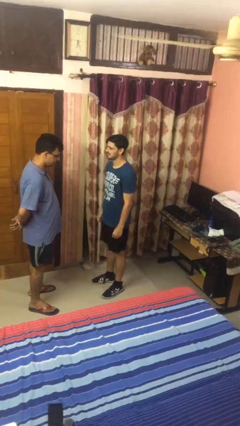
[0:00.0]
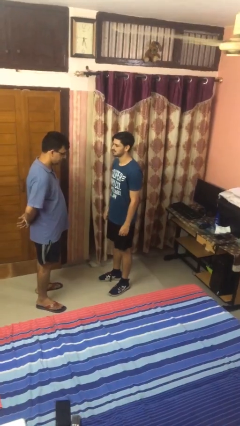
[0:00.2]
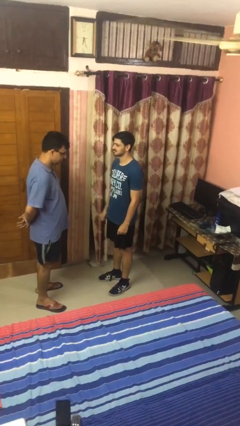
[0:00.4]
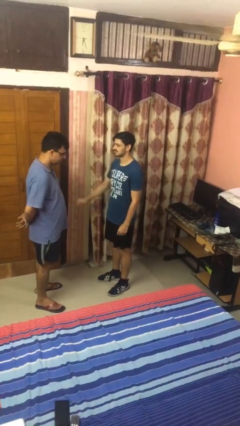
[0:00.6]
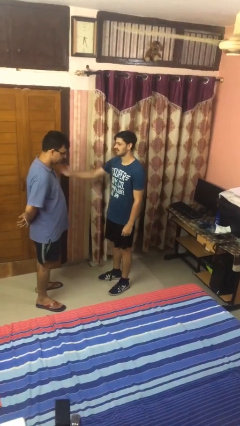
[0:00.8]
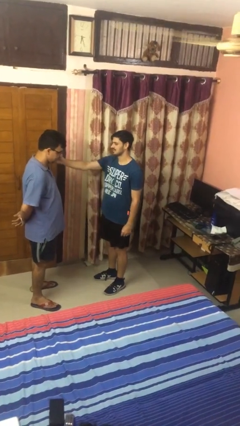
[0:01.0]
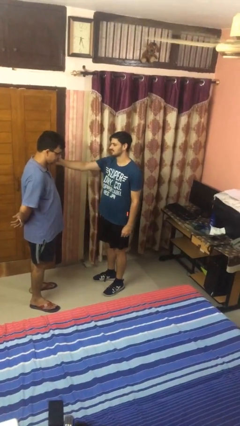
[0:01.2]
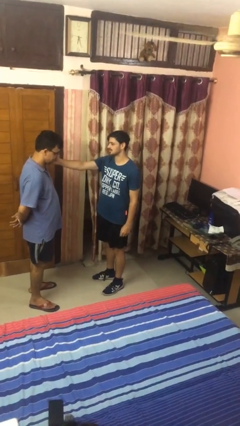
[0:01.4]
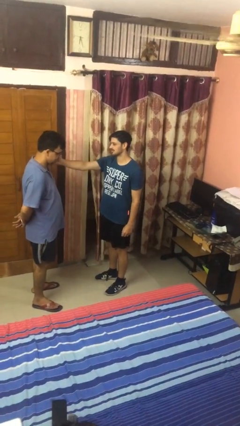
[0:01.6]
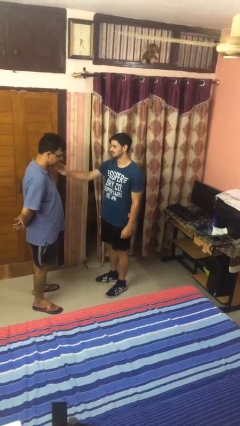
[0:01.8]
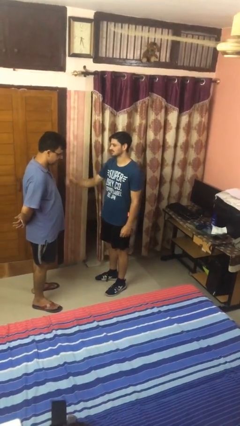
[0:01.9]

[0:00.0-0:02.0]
person touches face of person

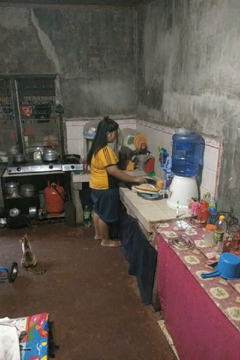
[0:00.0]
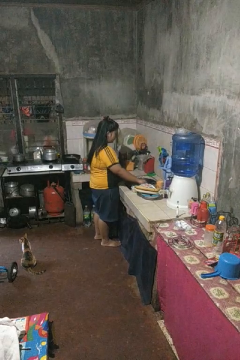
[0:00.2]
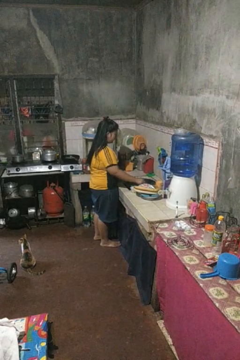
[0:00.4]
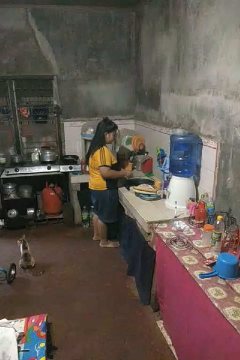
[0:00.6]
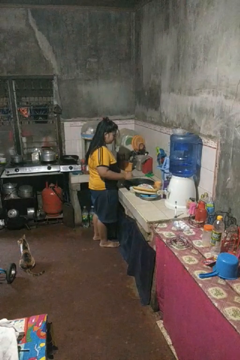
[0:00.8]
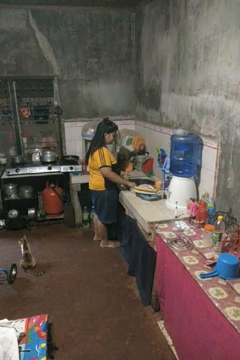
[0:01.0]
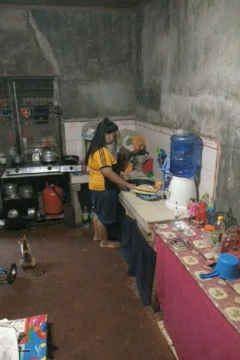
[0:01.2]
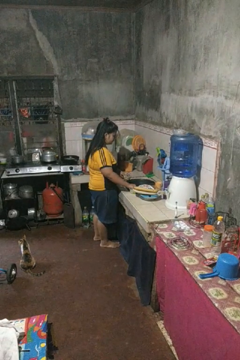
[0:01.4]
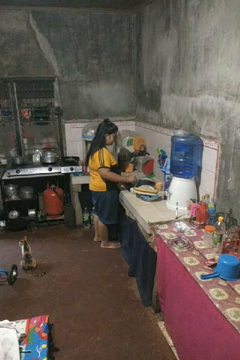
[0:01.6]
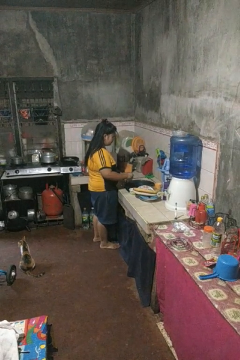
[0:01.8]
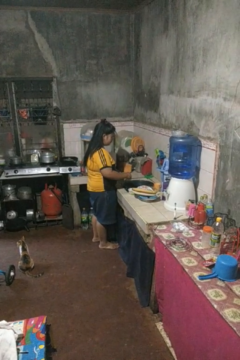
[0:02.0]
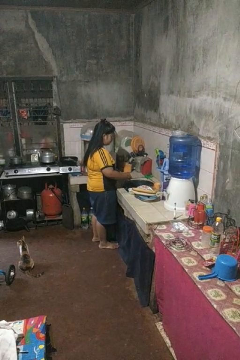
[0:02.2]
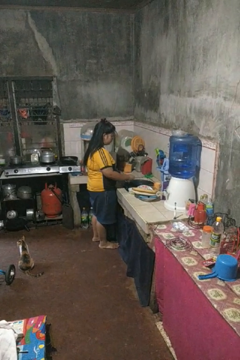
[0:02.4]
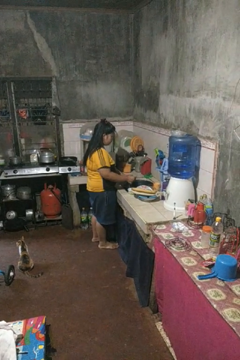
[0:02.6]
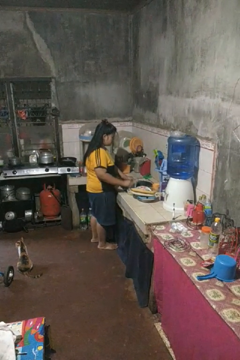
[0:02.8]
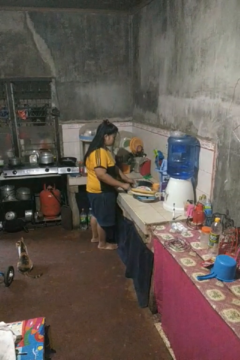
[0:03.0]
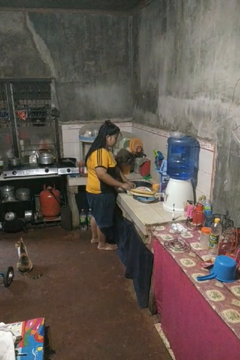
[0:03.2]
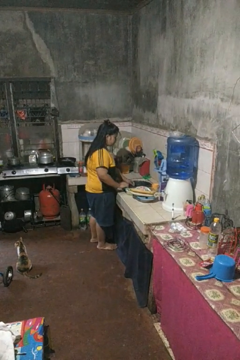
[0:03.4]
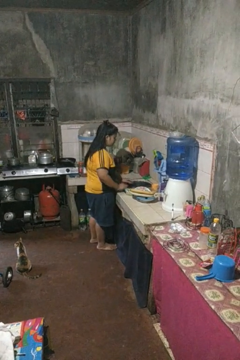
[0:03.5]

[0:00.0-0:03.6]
person washes dish

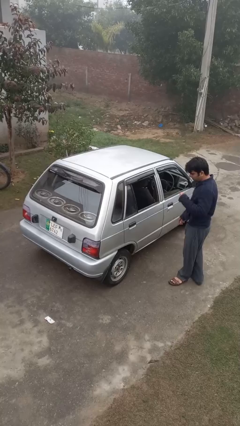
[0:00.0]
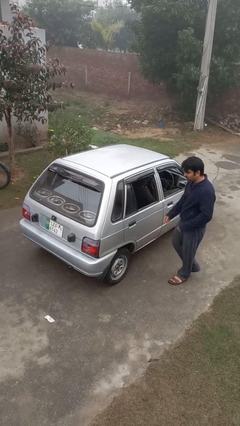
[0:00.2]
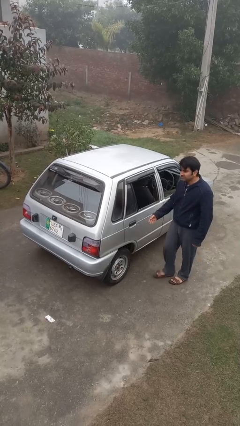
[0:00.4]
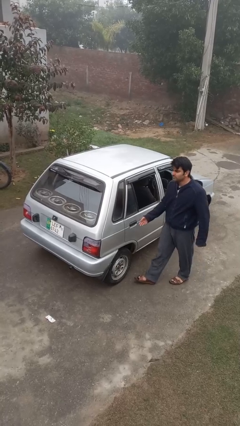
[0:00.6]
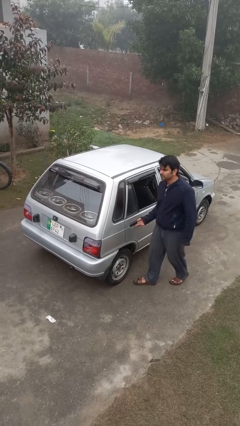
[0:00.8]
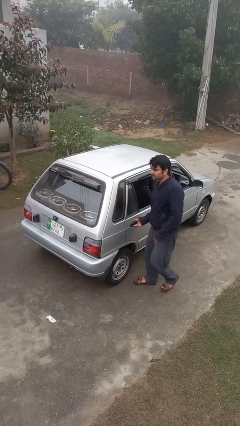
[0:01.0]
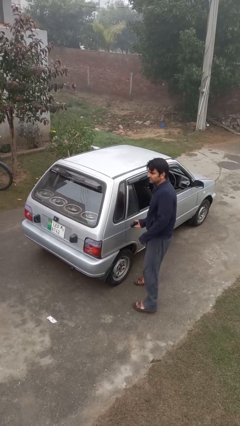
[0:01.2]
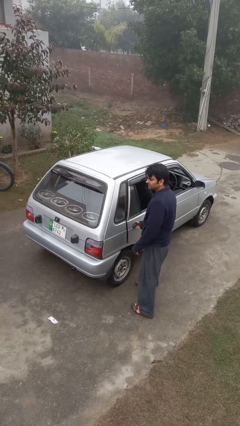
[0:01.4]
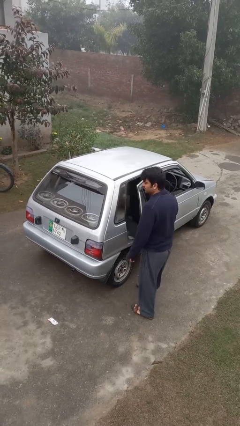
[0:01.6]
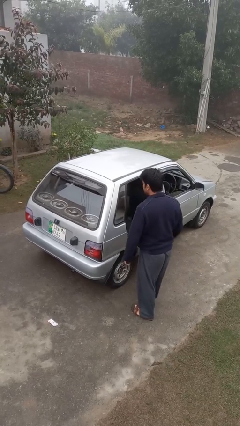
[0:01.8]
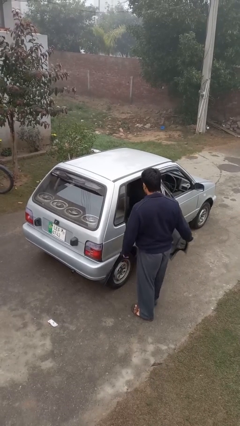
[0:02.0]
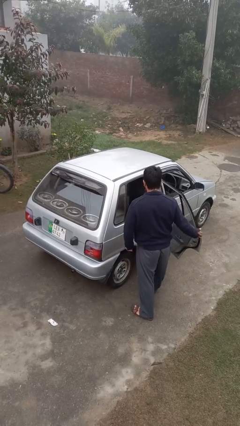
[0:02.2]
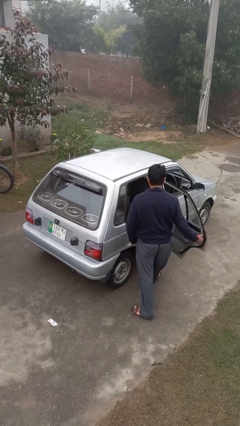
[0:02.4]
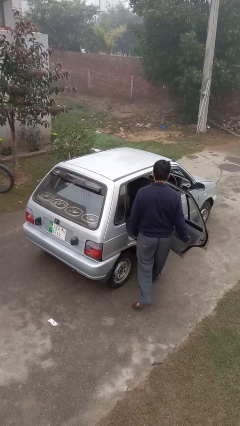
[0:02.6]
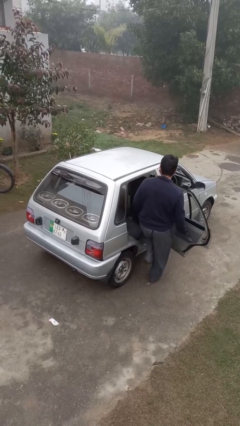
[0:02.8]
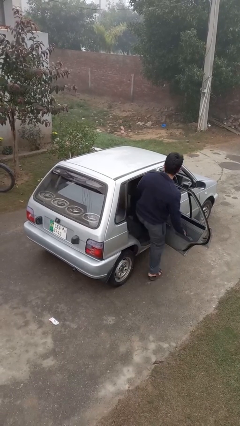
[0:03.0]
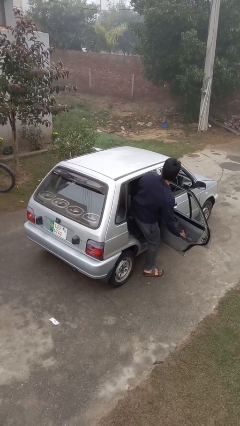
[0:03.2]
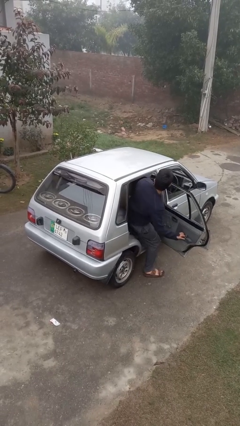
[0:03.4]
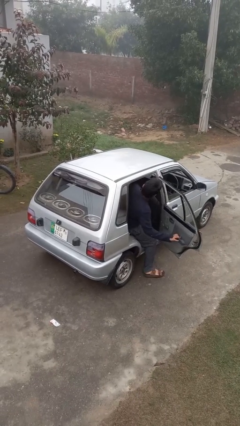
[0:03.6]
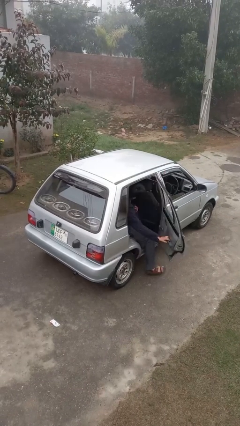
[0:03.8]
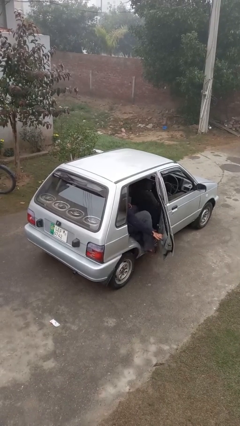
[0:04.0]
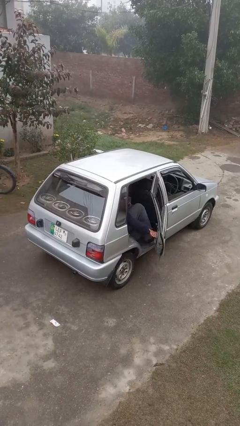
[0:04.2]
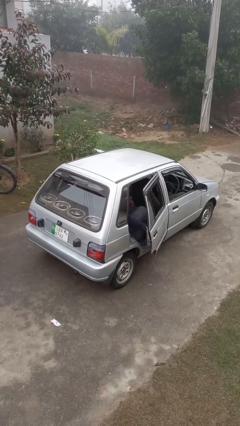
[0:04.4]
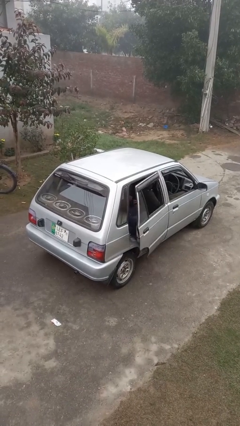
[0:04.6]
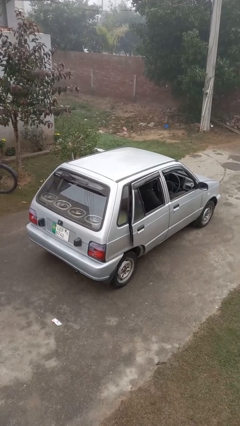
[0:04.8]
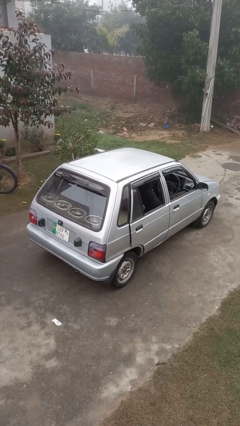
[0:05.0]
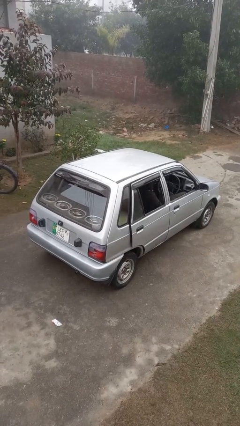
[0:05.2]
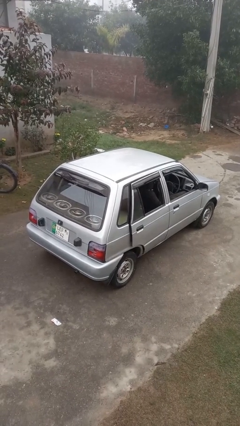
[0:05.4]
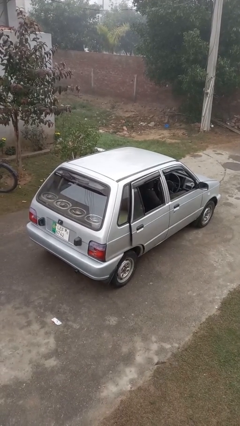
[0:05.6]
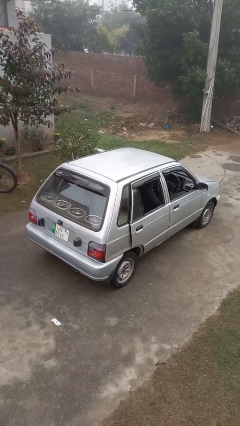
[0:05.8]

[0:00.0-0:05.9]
car picks up person

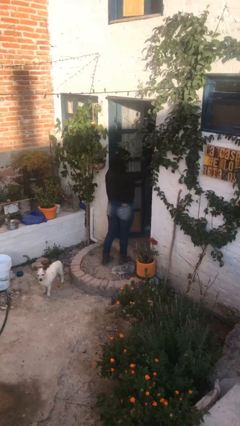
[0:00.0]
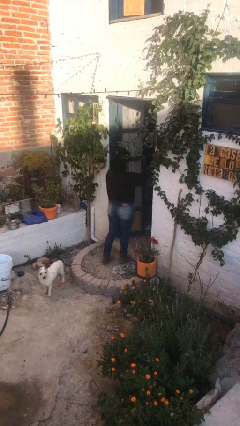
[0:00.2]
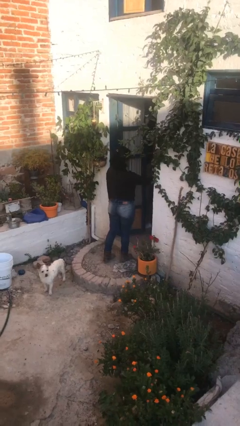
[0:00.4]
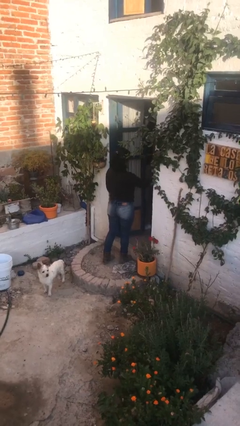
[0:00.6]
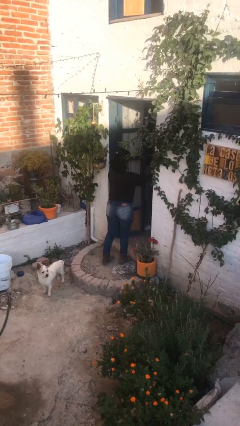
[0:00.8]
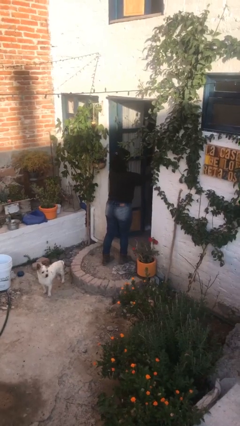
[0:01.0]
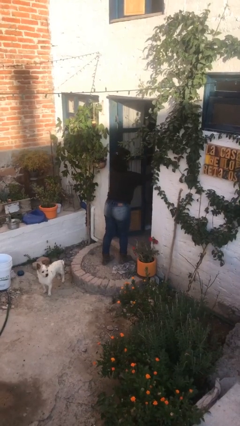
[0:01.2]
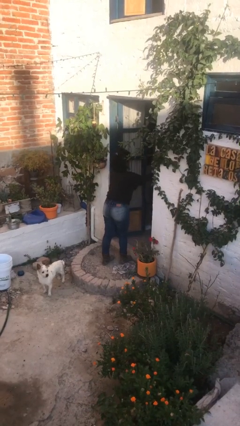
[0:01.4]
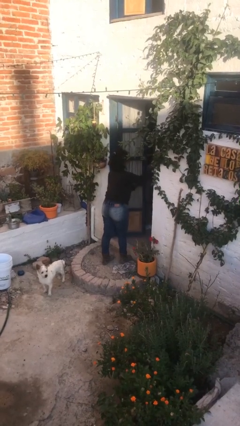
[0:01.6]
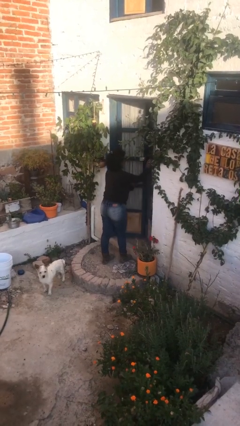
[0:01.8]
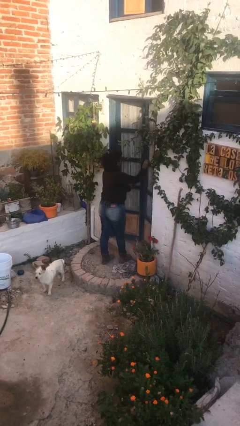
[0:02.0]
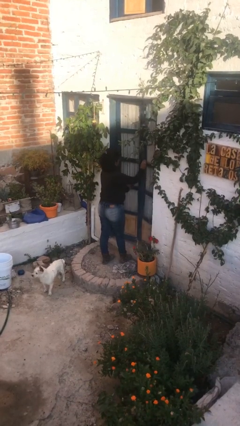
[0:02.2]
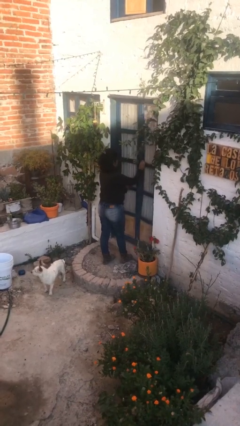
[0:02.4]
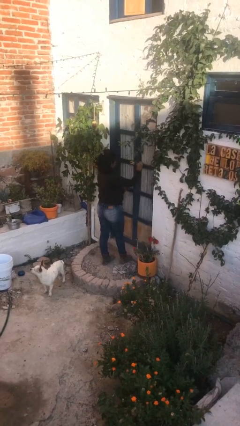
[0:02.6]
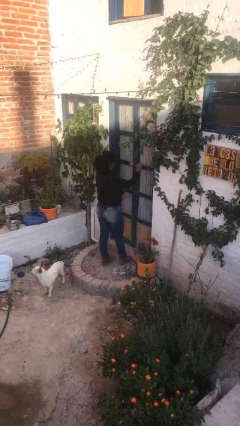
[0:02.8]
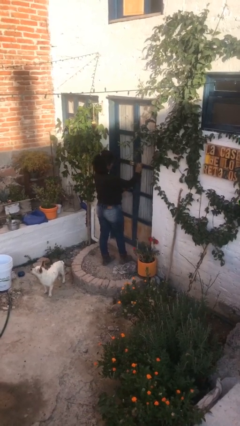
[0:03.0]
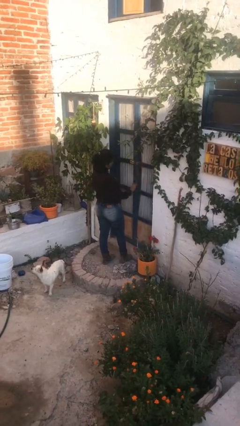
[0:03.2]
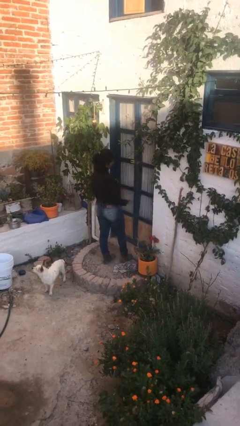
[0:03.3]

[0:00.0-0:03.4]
person closes facility door

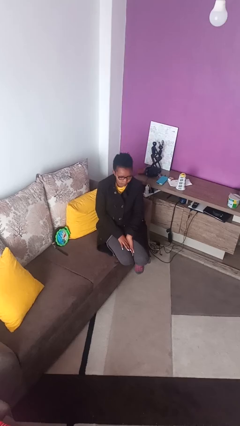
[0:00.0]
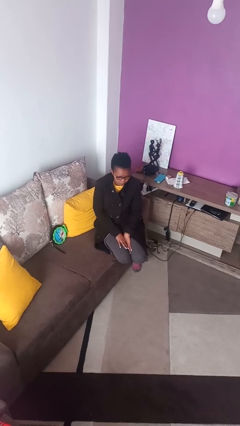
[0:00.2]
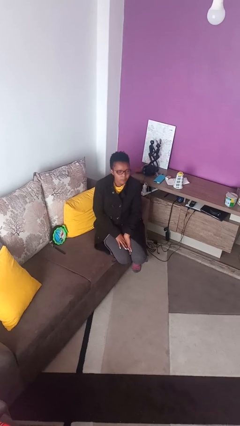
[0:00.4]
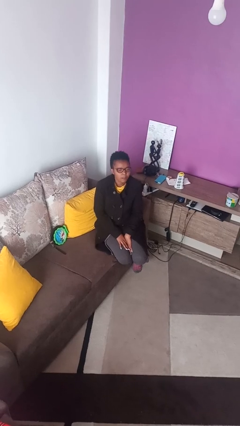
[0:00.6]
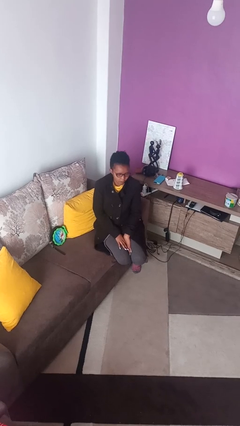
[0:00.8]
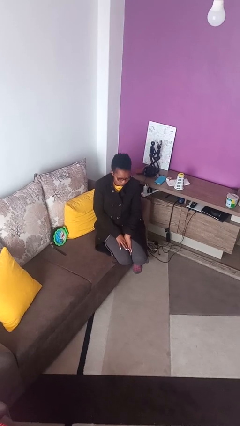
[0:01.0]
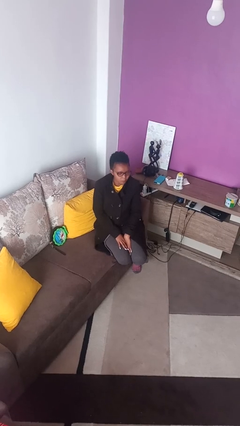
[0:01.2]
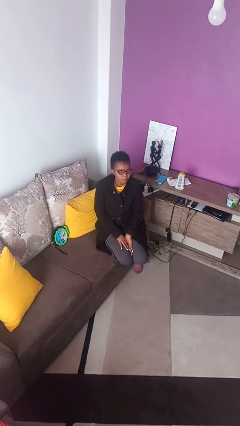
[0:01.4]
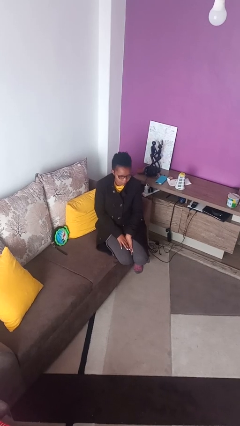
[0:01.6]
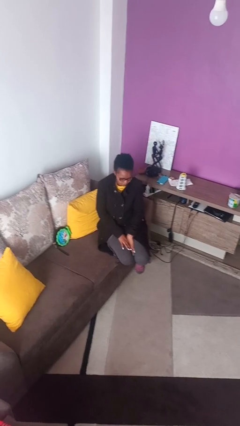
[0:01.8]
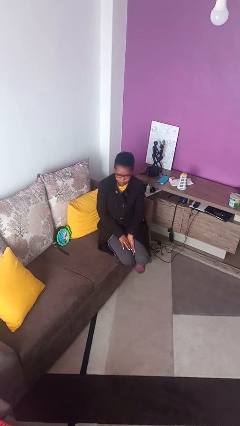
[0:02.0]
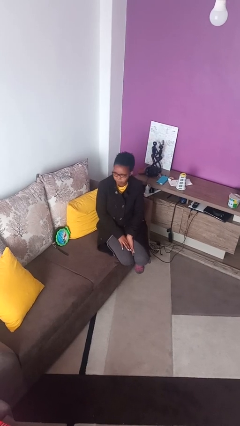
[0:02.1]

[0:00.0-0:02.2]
person nods head

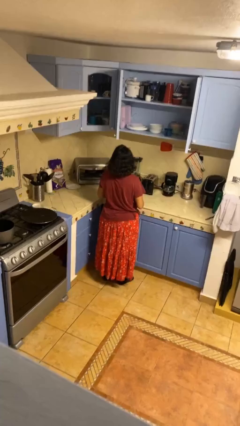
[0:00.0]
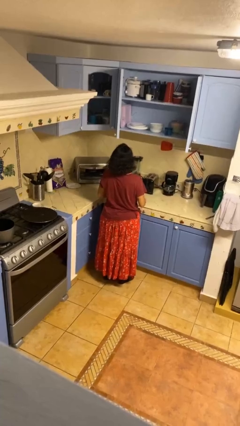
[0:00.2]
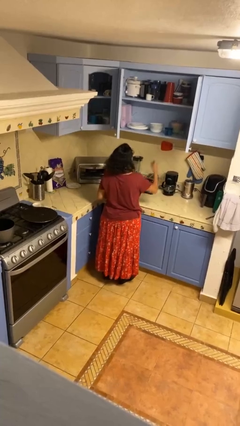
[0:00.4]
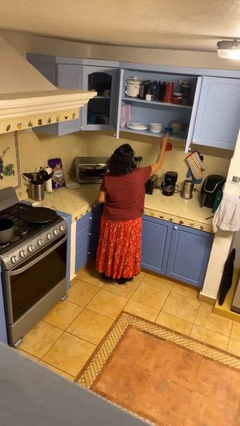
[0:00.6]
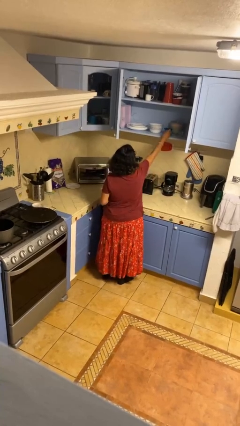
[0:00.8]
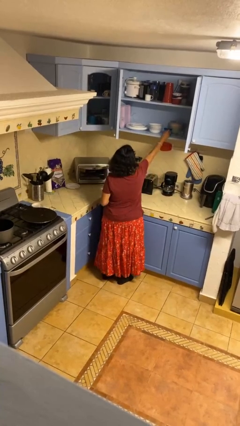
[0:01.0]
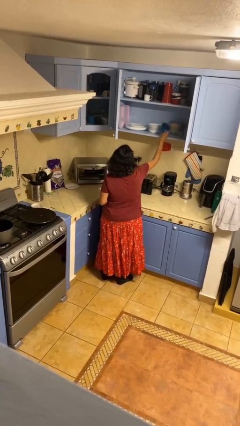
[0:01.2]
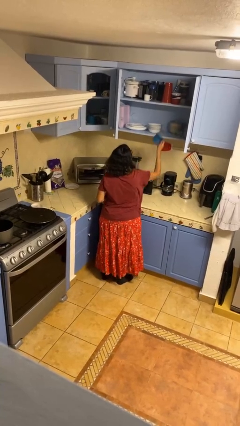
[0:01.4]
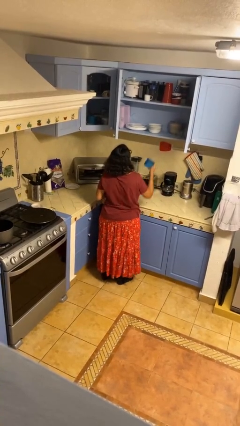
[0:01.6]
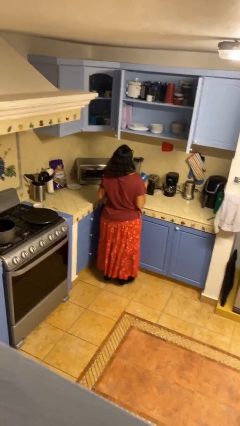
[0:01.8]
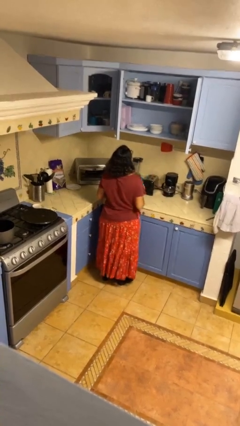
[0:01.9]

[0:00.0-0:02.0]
person picks up object from cabinet
